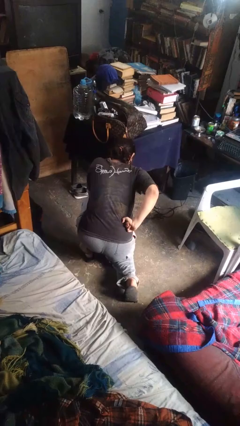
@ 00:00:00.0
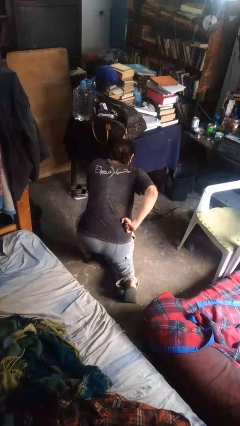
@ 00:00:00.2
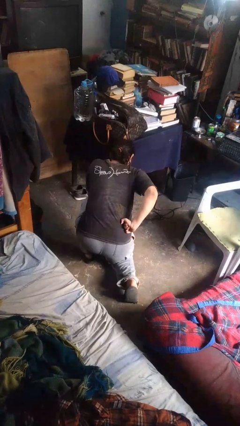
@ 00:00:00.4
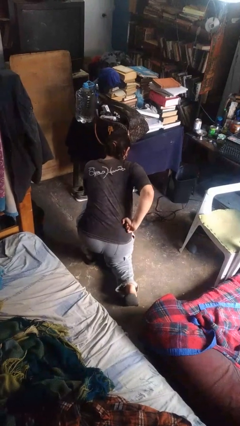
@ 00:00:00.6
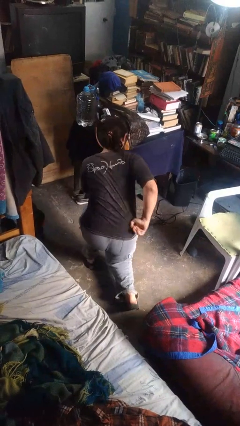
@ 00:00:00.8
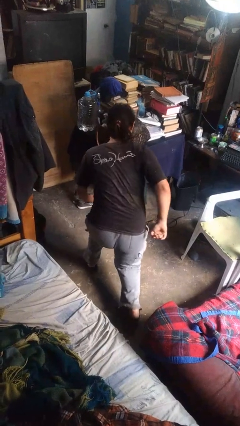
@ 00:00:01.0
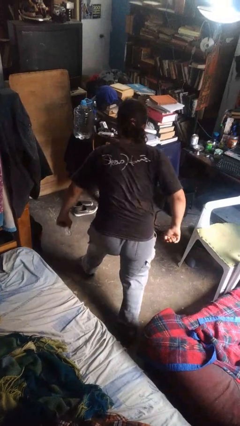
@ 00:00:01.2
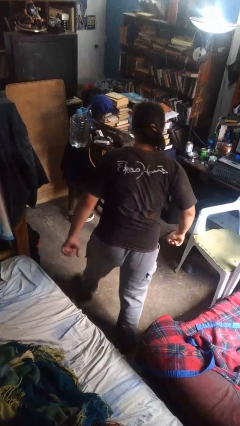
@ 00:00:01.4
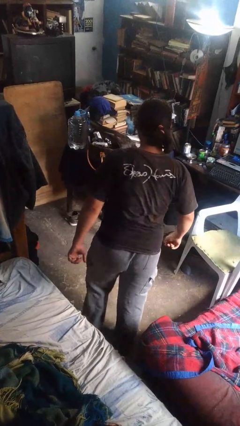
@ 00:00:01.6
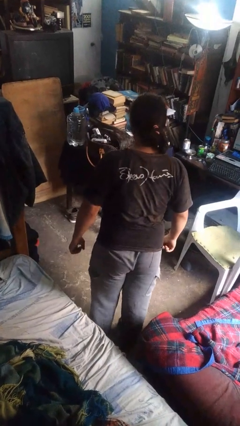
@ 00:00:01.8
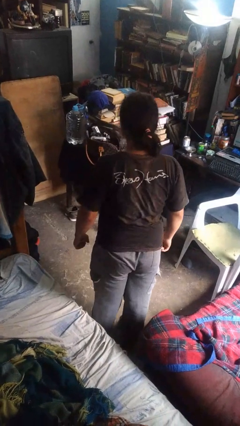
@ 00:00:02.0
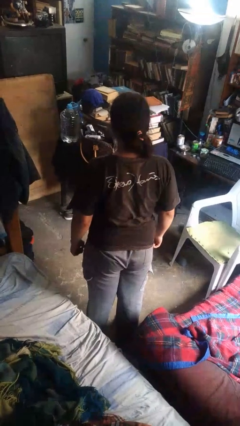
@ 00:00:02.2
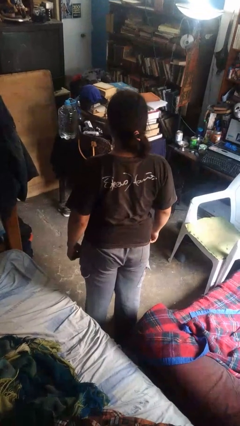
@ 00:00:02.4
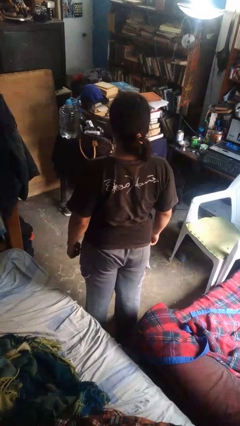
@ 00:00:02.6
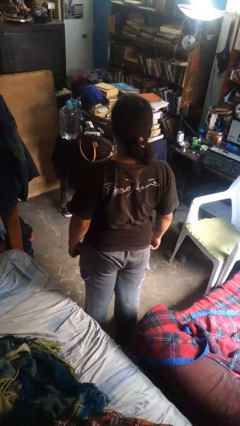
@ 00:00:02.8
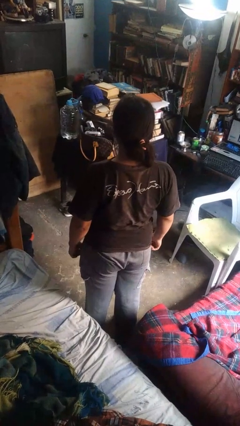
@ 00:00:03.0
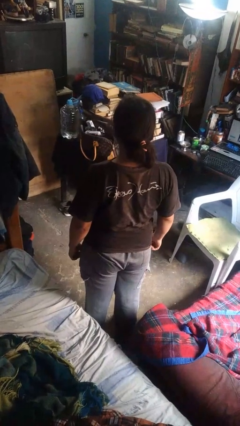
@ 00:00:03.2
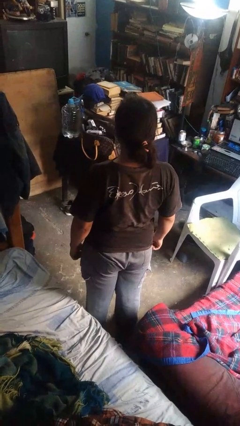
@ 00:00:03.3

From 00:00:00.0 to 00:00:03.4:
person stands up from floor

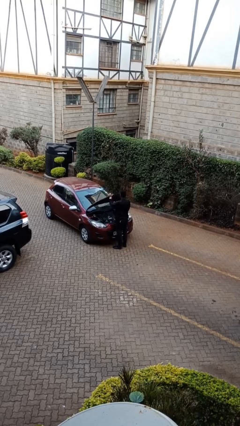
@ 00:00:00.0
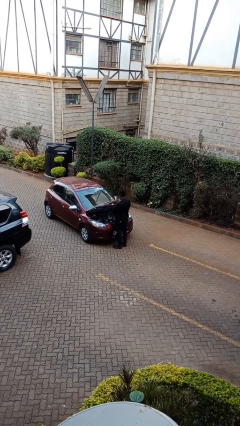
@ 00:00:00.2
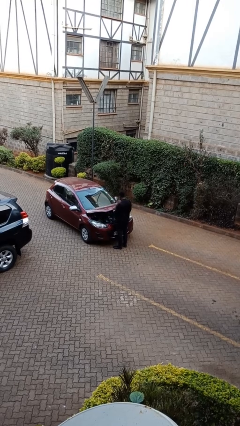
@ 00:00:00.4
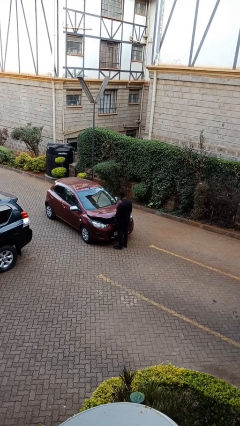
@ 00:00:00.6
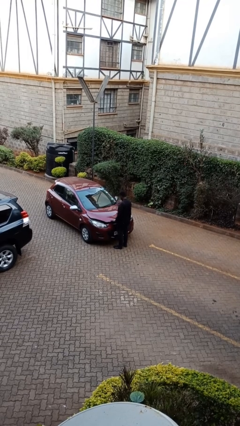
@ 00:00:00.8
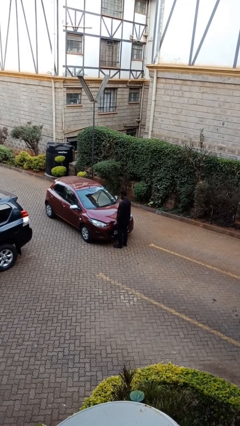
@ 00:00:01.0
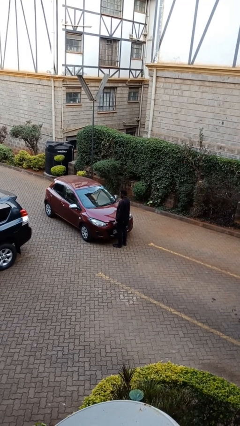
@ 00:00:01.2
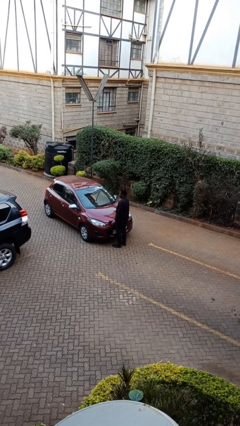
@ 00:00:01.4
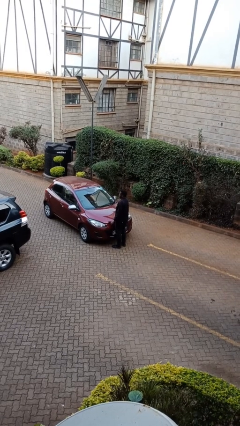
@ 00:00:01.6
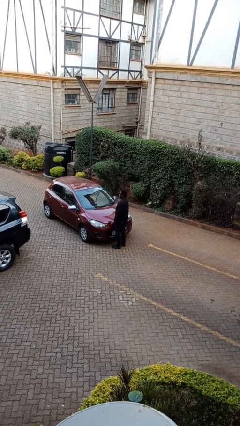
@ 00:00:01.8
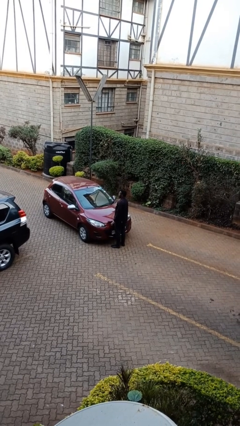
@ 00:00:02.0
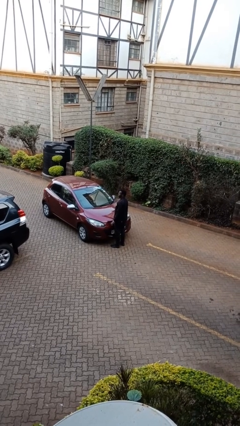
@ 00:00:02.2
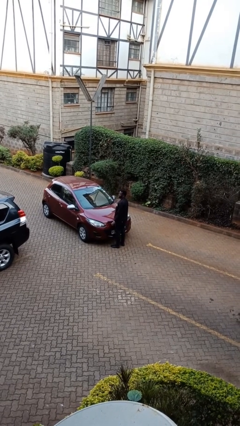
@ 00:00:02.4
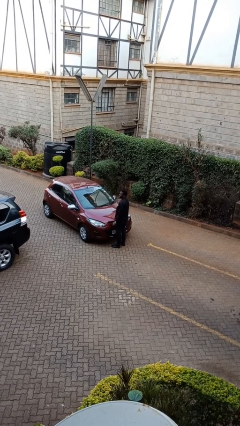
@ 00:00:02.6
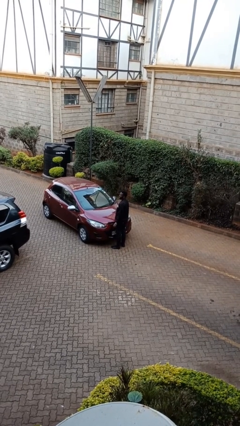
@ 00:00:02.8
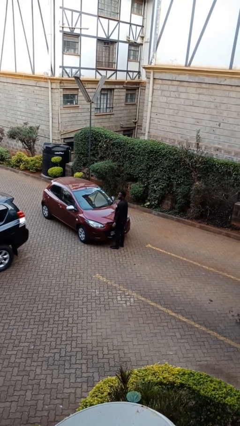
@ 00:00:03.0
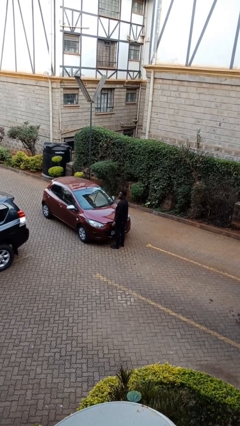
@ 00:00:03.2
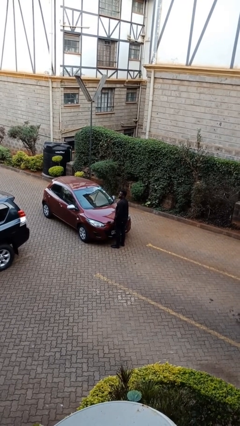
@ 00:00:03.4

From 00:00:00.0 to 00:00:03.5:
person closes car hood

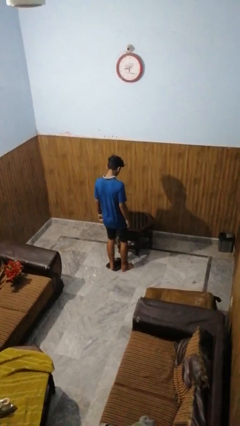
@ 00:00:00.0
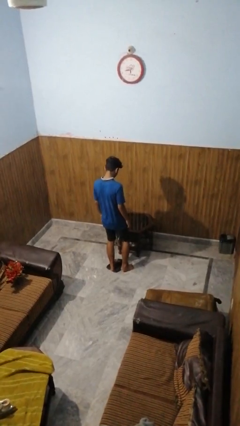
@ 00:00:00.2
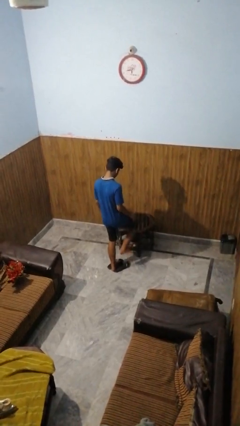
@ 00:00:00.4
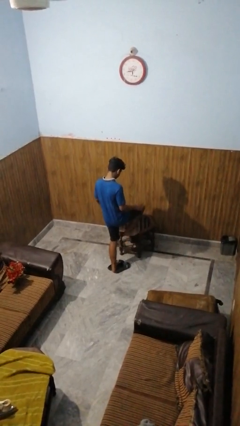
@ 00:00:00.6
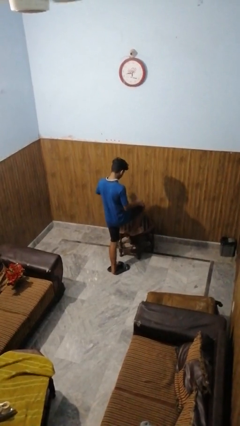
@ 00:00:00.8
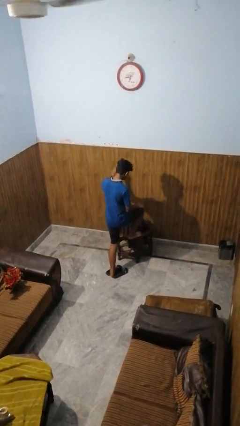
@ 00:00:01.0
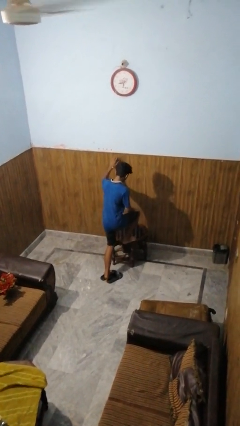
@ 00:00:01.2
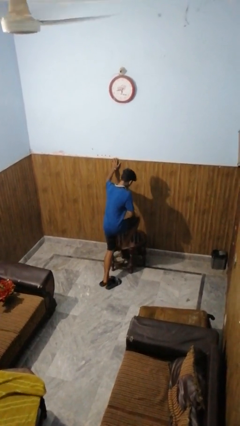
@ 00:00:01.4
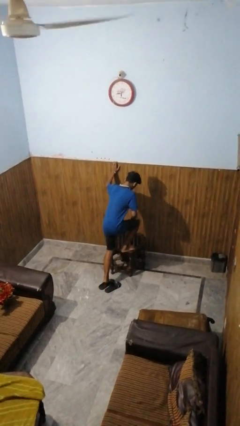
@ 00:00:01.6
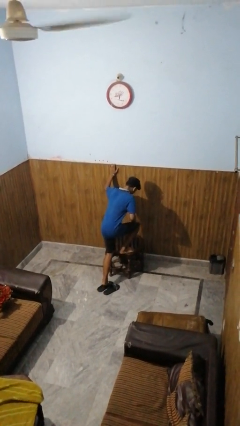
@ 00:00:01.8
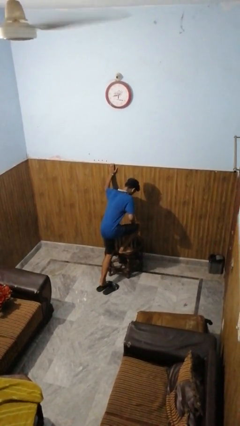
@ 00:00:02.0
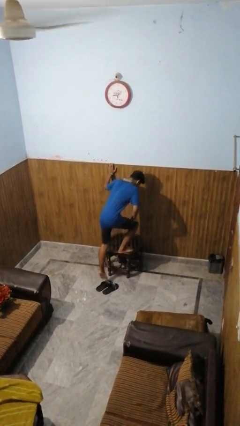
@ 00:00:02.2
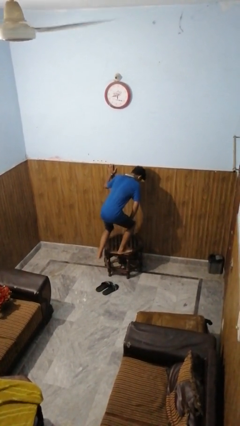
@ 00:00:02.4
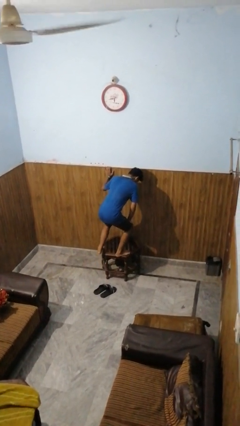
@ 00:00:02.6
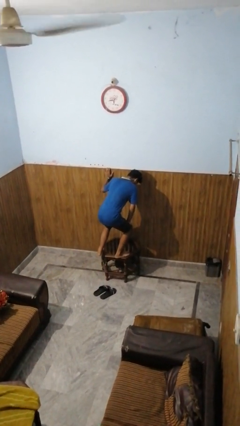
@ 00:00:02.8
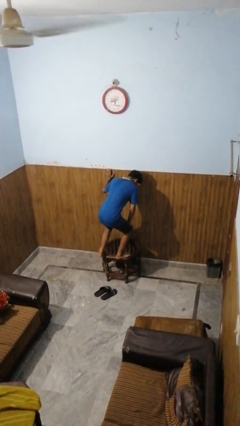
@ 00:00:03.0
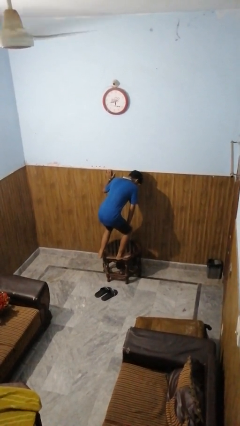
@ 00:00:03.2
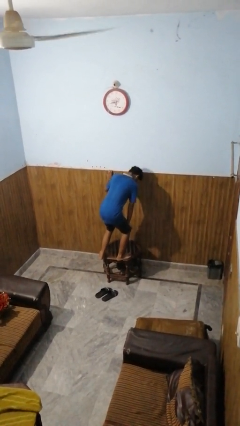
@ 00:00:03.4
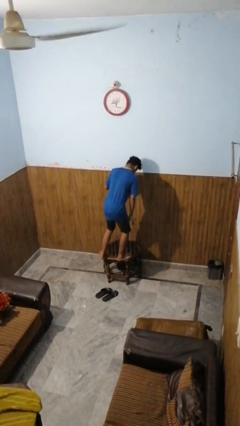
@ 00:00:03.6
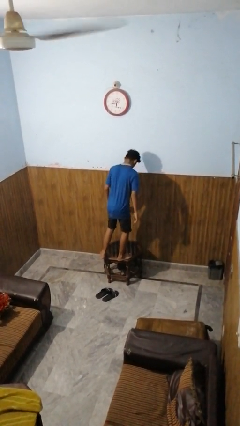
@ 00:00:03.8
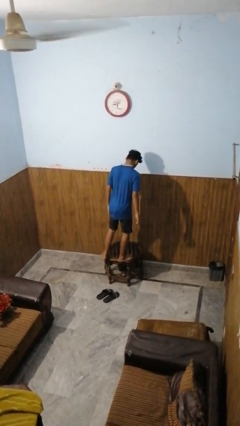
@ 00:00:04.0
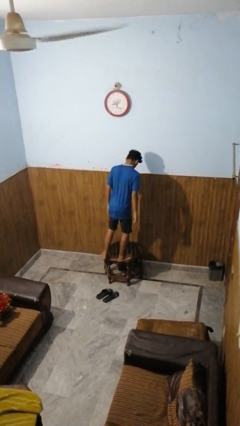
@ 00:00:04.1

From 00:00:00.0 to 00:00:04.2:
person climbs on table

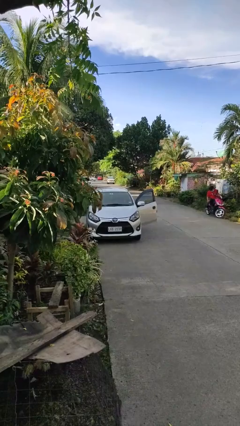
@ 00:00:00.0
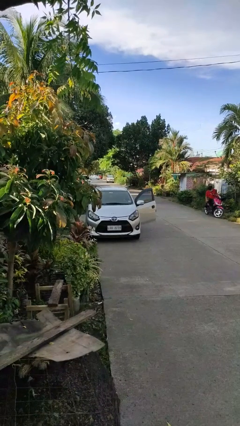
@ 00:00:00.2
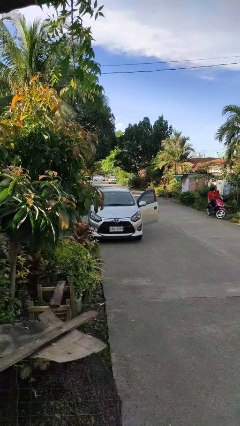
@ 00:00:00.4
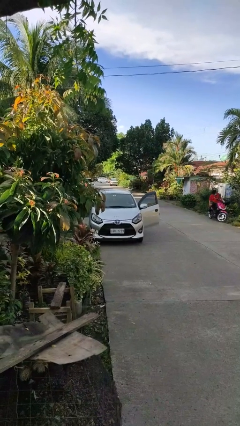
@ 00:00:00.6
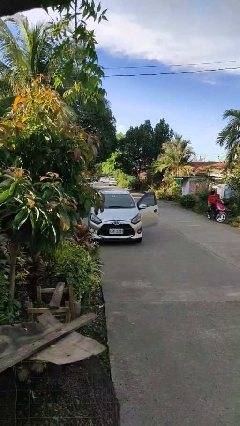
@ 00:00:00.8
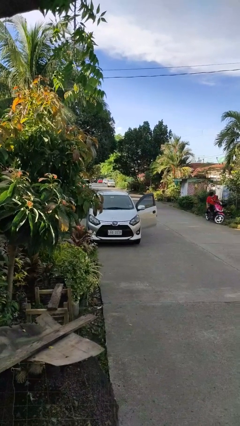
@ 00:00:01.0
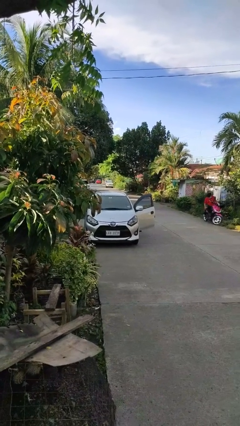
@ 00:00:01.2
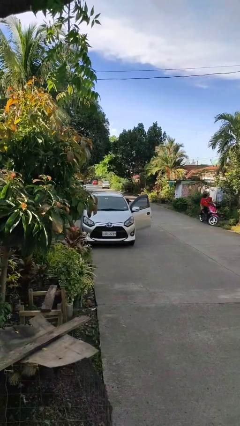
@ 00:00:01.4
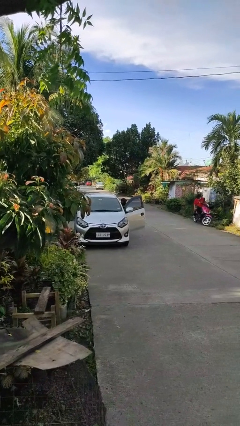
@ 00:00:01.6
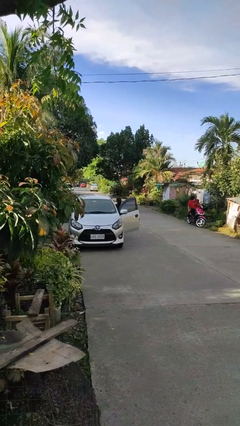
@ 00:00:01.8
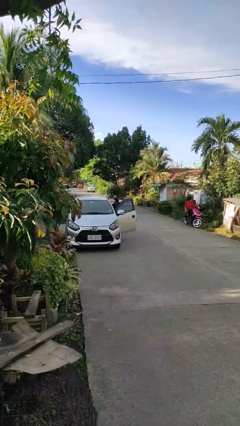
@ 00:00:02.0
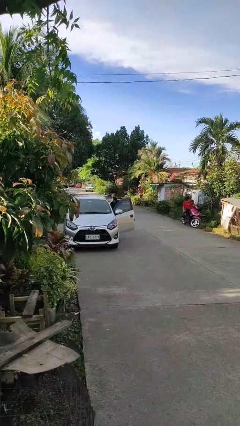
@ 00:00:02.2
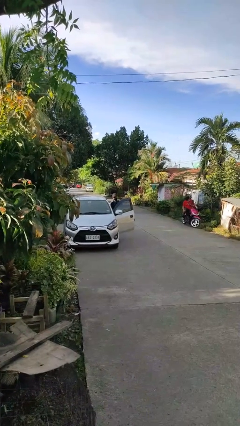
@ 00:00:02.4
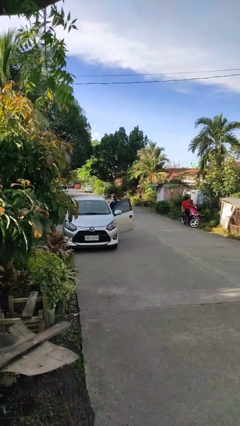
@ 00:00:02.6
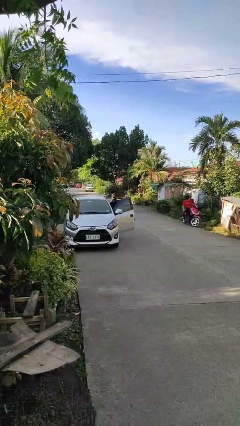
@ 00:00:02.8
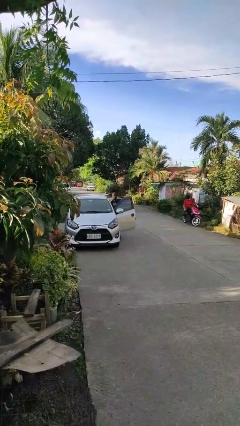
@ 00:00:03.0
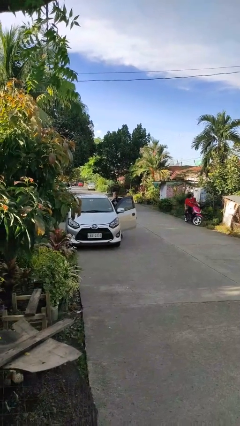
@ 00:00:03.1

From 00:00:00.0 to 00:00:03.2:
person exits car

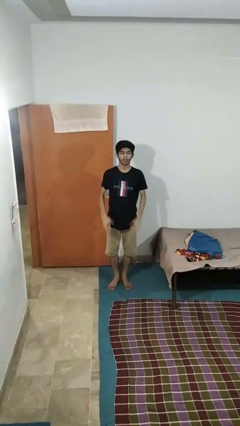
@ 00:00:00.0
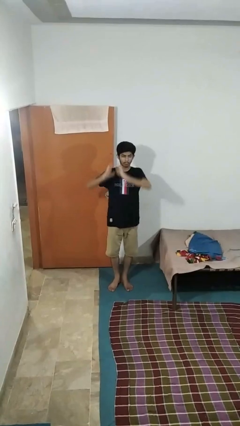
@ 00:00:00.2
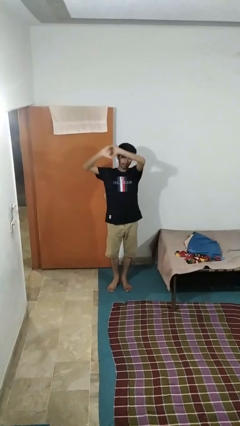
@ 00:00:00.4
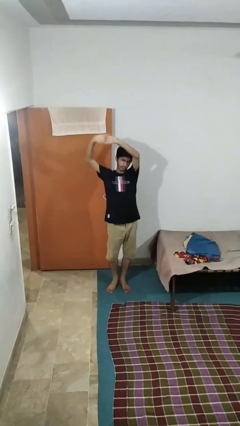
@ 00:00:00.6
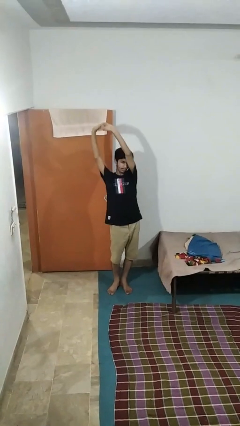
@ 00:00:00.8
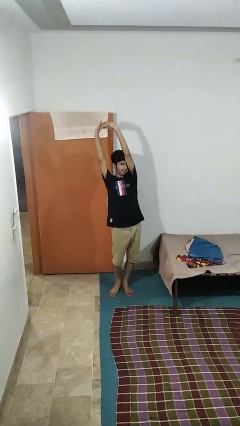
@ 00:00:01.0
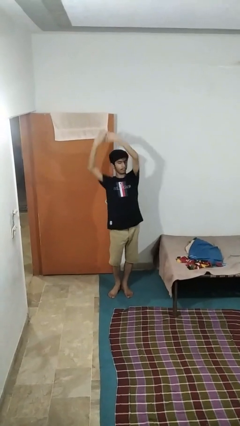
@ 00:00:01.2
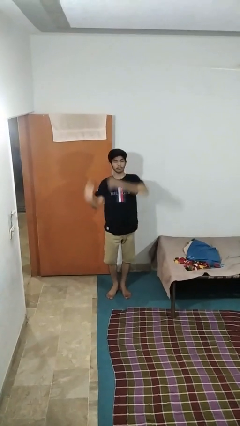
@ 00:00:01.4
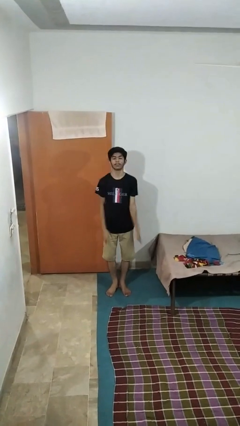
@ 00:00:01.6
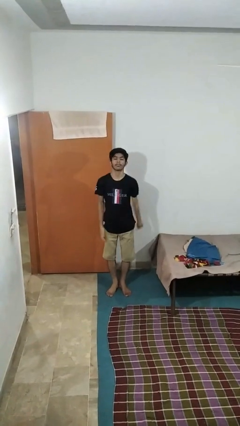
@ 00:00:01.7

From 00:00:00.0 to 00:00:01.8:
person stretches arms over head

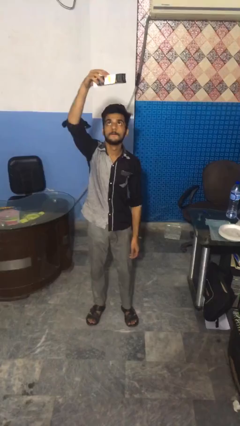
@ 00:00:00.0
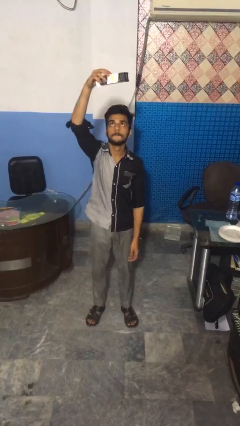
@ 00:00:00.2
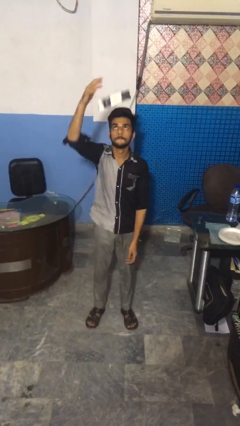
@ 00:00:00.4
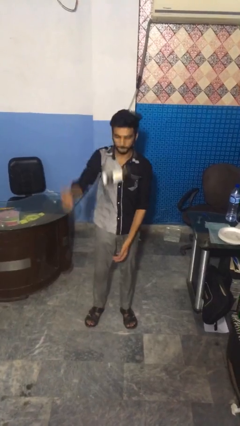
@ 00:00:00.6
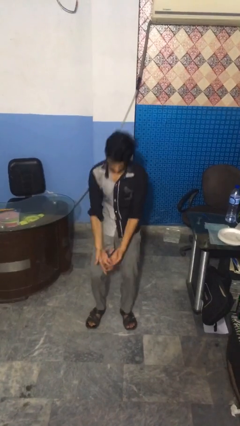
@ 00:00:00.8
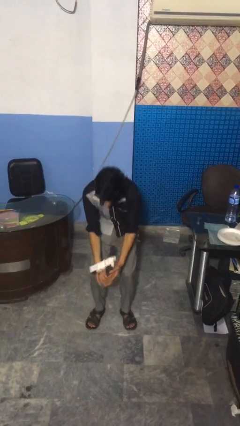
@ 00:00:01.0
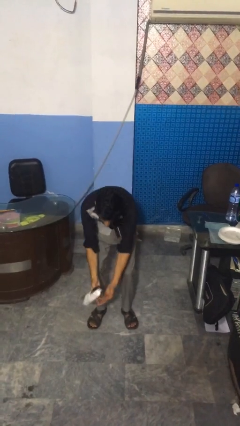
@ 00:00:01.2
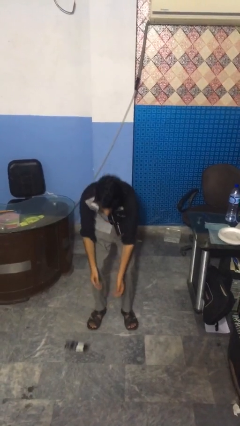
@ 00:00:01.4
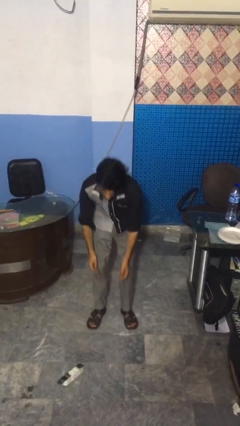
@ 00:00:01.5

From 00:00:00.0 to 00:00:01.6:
person drops object
